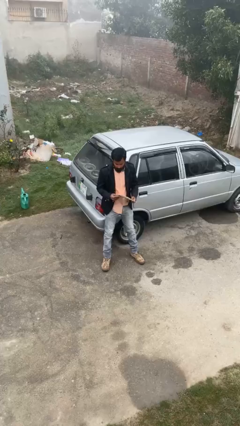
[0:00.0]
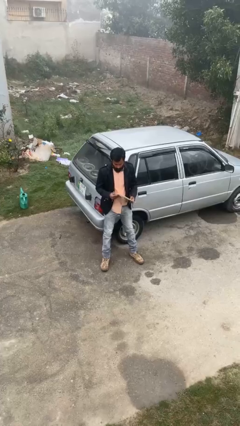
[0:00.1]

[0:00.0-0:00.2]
person reads document

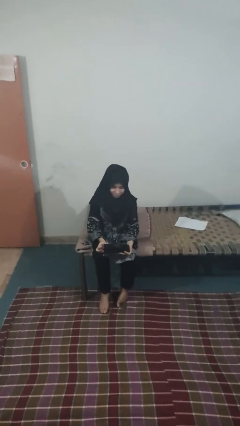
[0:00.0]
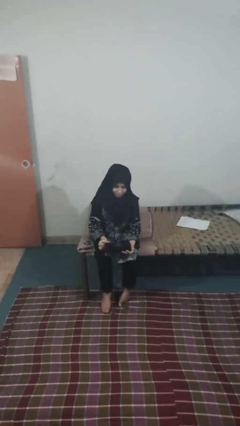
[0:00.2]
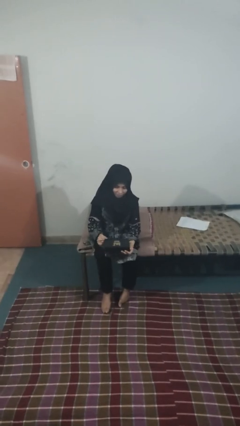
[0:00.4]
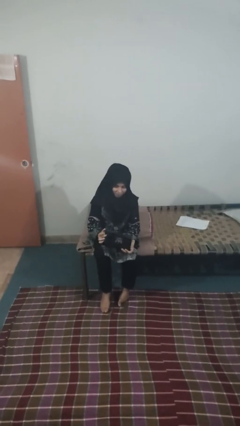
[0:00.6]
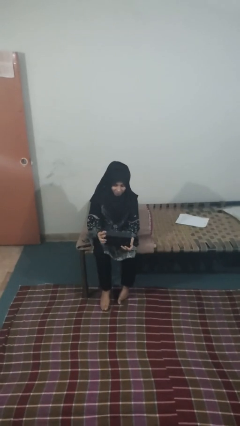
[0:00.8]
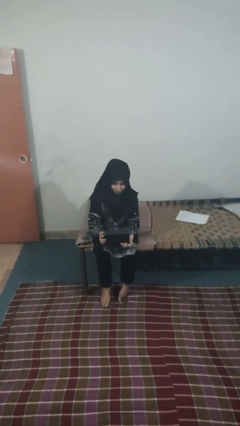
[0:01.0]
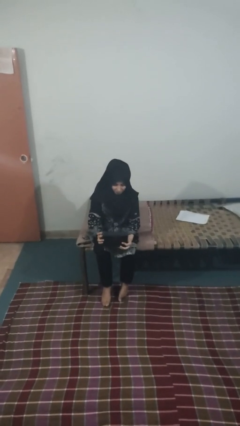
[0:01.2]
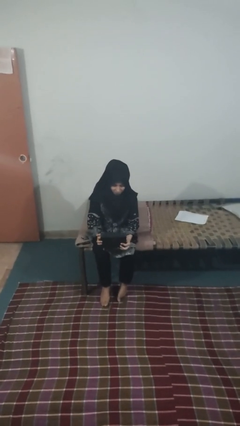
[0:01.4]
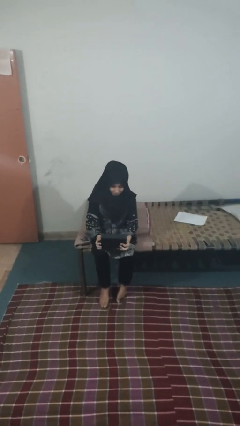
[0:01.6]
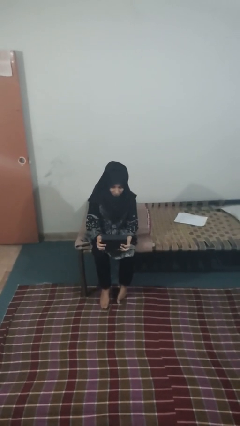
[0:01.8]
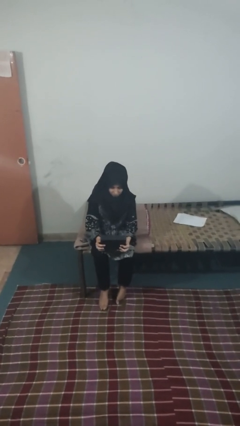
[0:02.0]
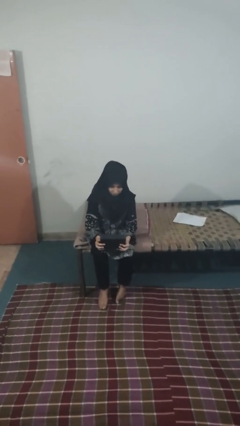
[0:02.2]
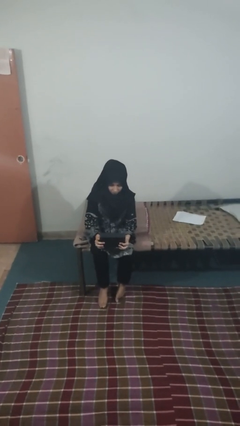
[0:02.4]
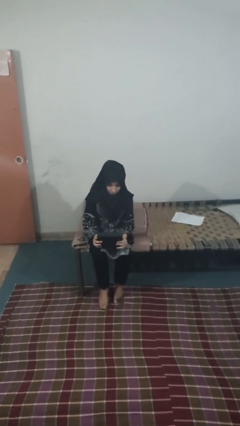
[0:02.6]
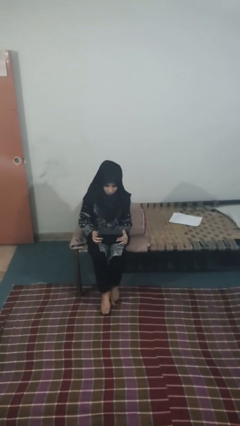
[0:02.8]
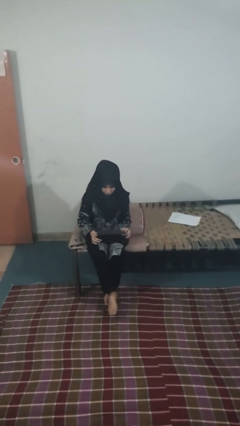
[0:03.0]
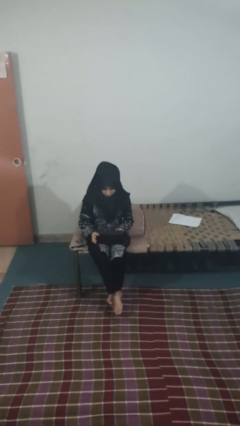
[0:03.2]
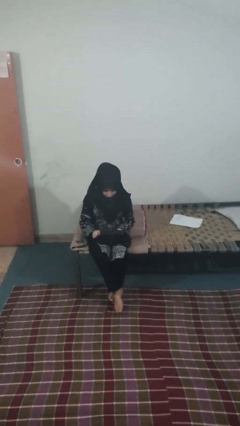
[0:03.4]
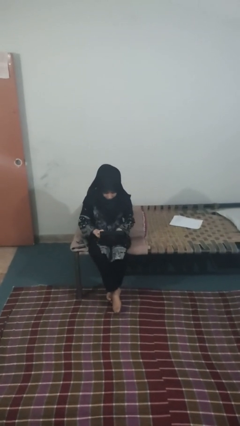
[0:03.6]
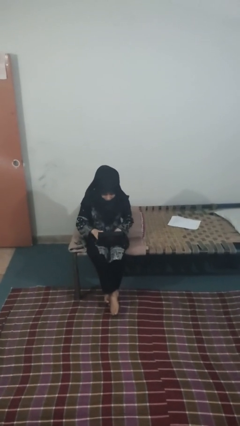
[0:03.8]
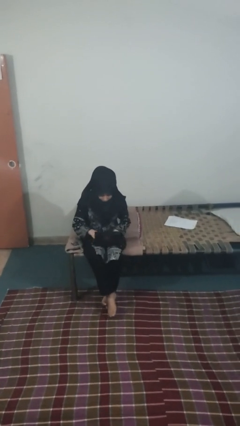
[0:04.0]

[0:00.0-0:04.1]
person opens jewelry box

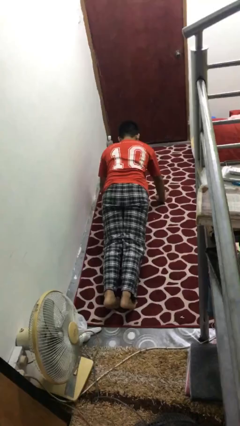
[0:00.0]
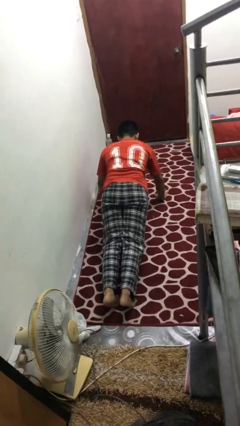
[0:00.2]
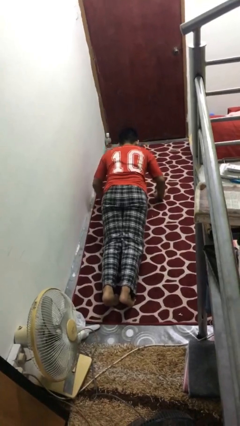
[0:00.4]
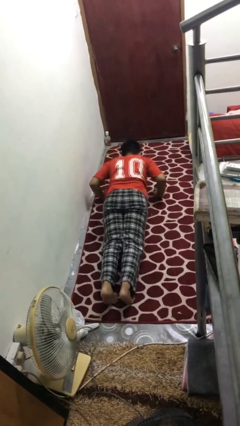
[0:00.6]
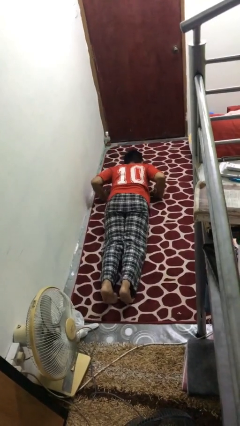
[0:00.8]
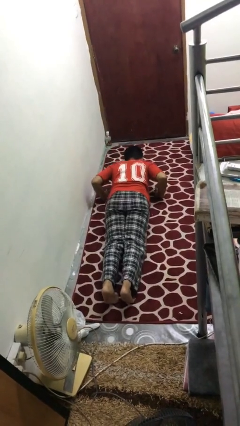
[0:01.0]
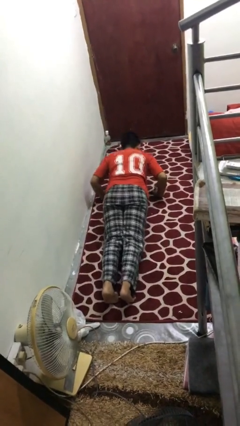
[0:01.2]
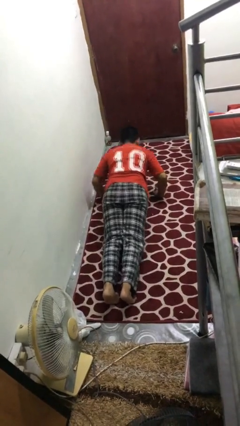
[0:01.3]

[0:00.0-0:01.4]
person exercises with pushup

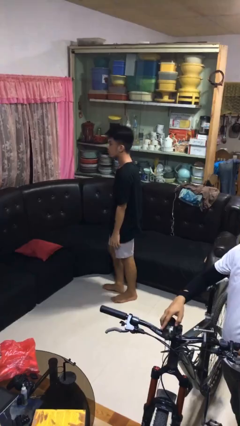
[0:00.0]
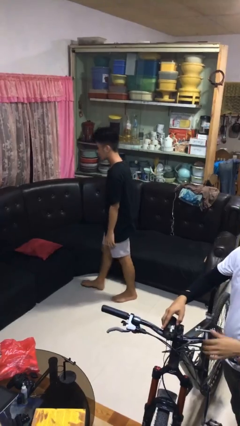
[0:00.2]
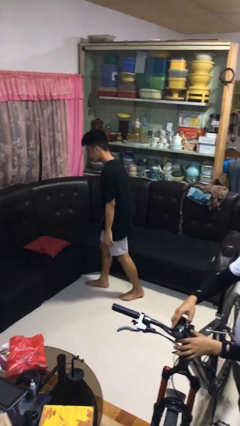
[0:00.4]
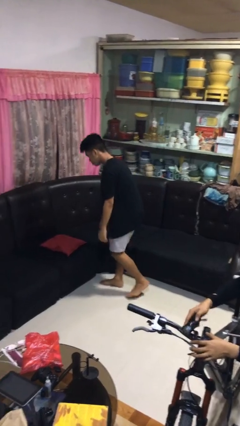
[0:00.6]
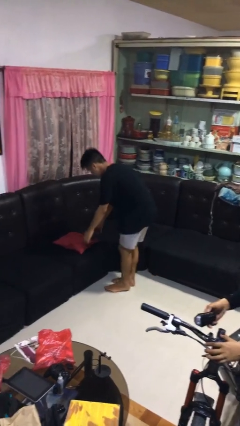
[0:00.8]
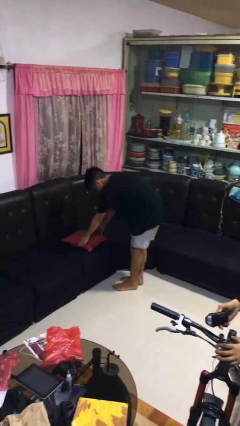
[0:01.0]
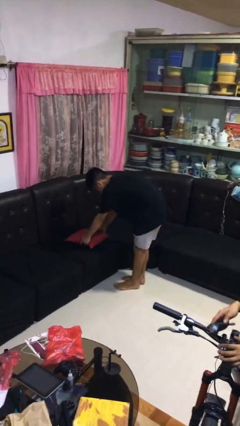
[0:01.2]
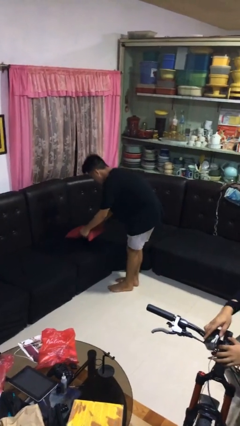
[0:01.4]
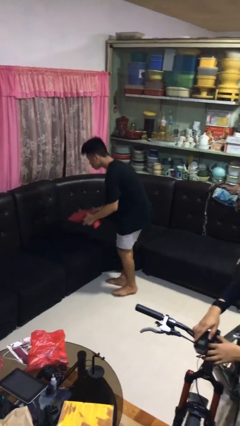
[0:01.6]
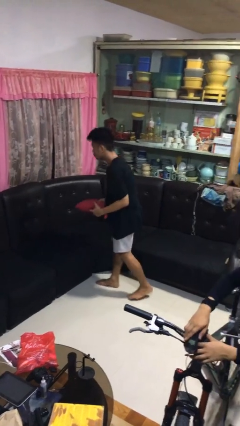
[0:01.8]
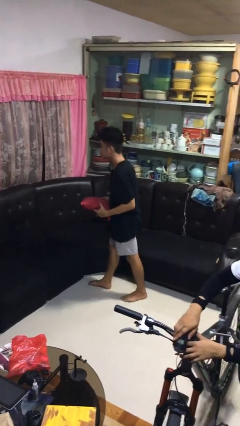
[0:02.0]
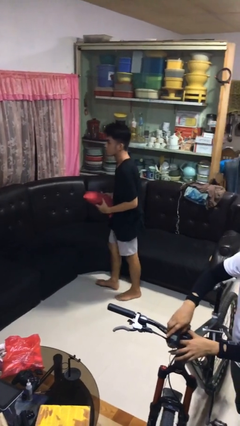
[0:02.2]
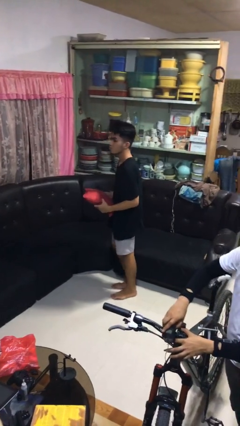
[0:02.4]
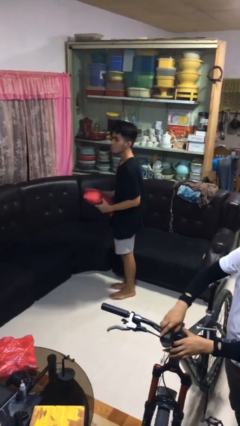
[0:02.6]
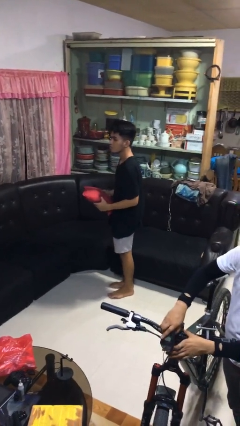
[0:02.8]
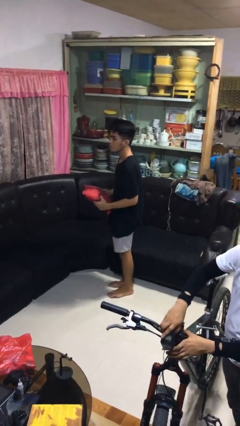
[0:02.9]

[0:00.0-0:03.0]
person picks up object from couch

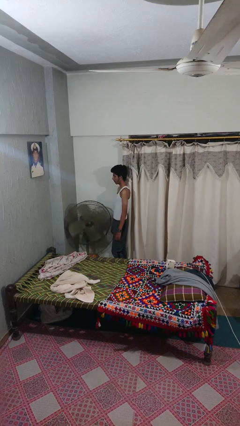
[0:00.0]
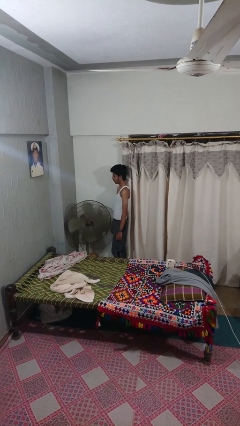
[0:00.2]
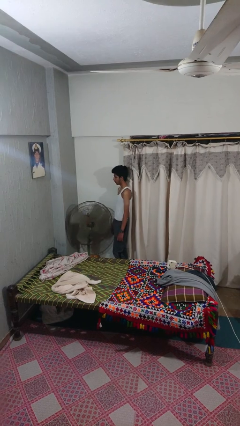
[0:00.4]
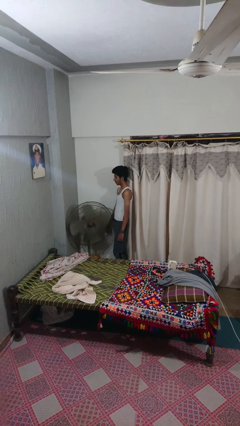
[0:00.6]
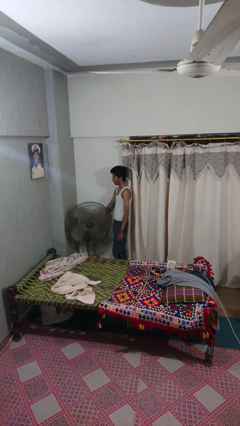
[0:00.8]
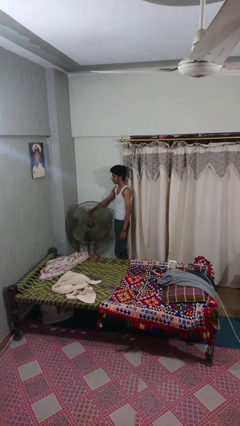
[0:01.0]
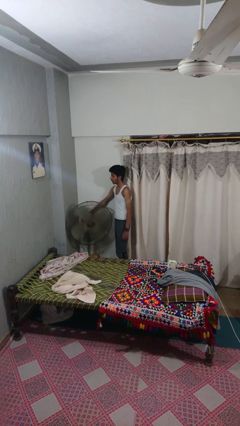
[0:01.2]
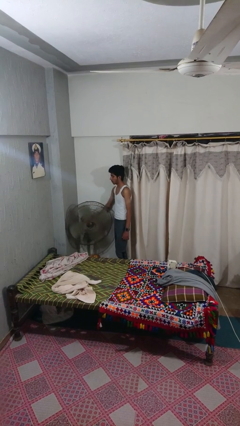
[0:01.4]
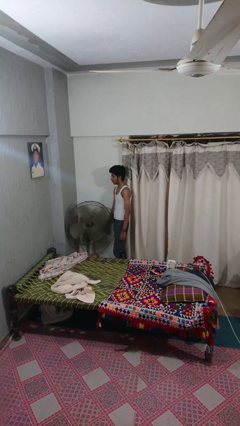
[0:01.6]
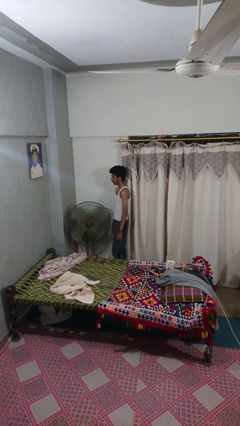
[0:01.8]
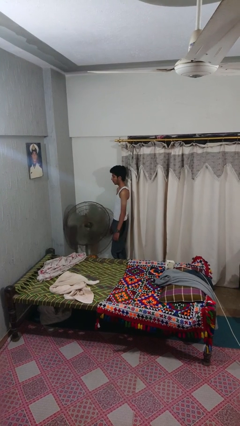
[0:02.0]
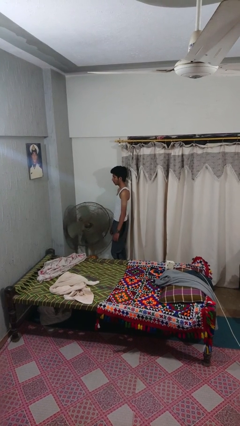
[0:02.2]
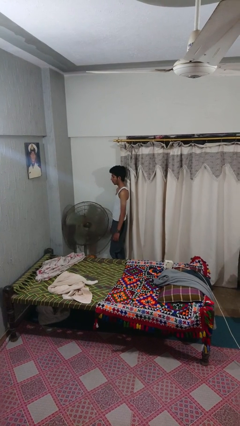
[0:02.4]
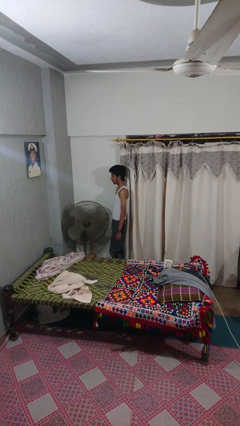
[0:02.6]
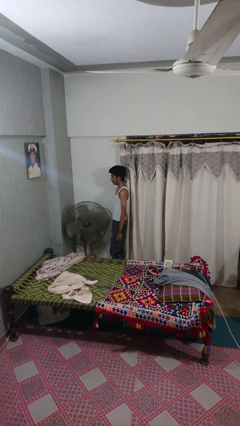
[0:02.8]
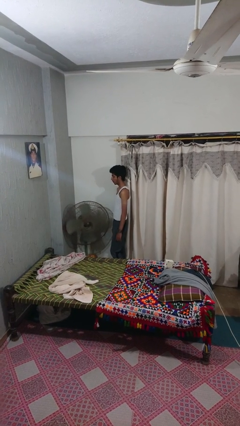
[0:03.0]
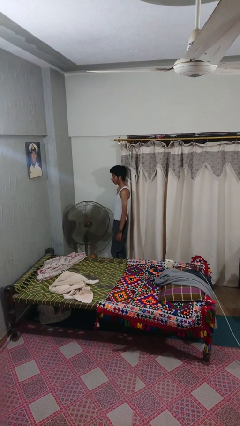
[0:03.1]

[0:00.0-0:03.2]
person turns off fan

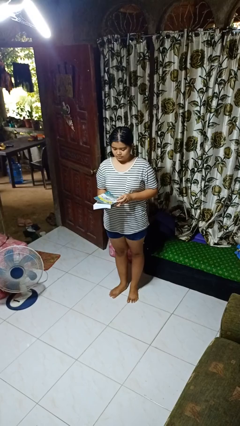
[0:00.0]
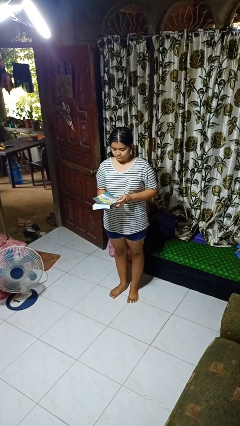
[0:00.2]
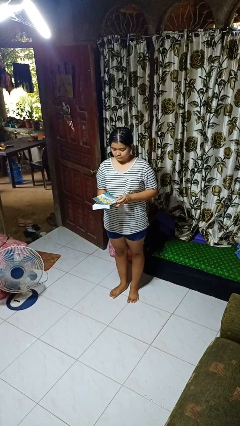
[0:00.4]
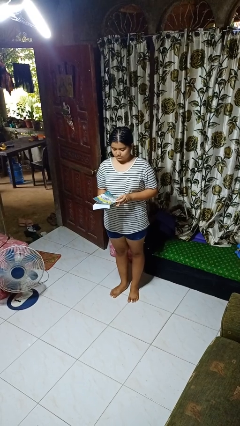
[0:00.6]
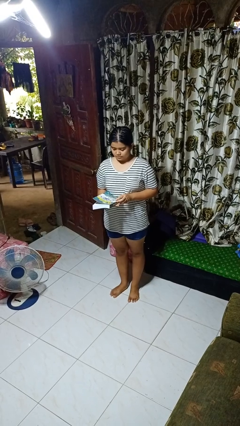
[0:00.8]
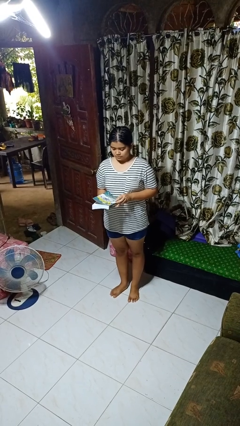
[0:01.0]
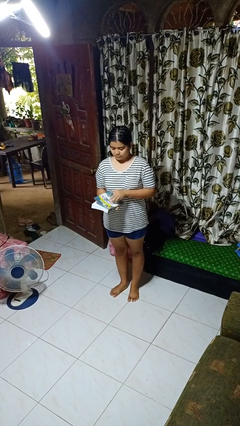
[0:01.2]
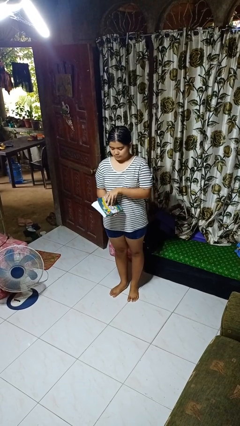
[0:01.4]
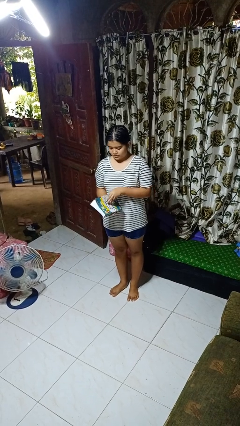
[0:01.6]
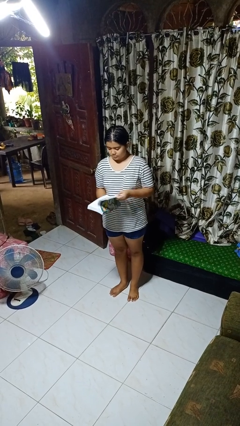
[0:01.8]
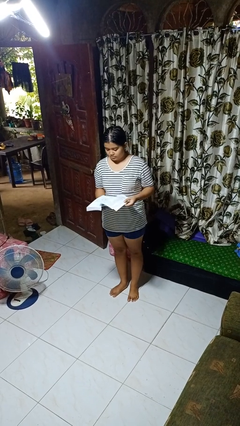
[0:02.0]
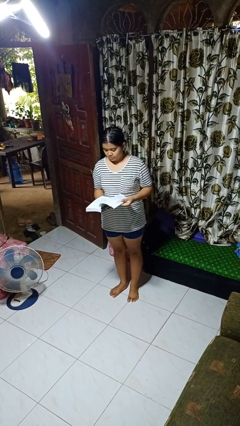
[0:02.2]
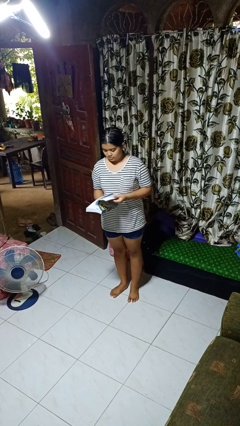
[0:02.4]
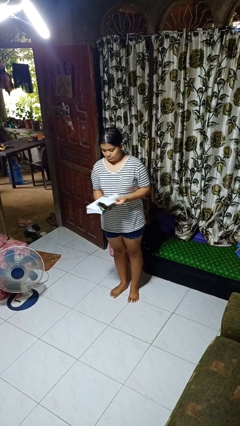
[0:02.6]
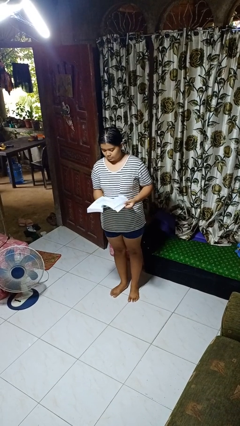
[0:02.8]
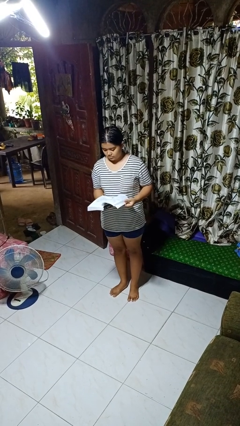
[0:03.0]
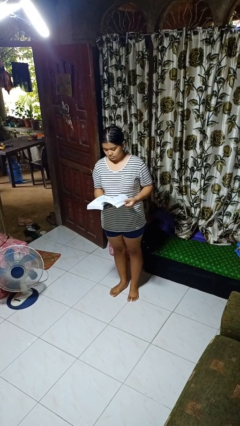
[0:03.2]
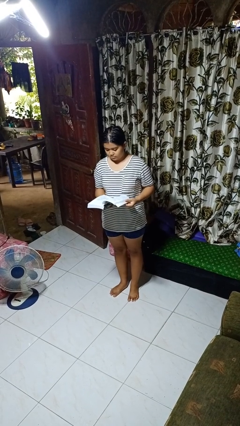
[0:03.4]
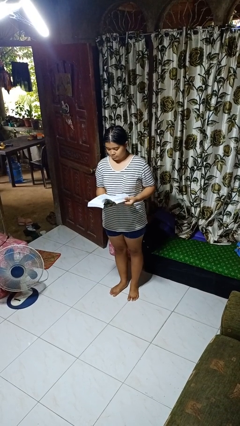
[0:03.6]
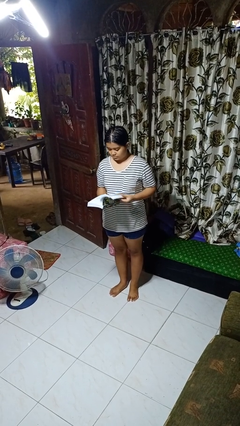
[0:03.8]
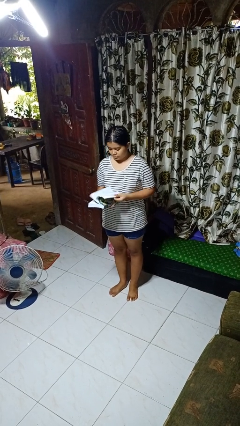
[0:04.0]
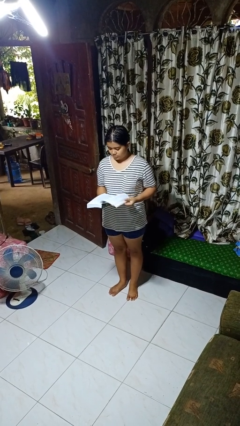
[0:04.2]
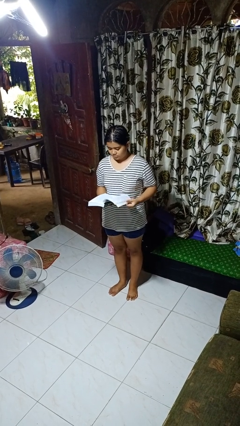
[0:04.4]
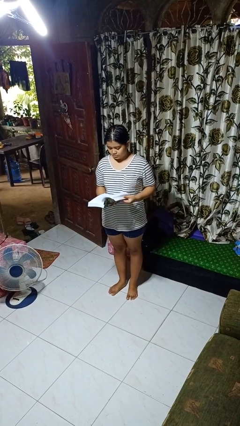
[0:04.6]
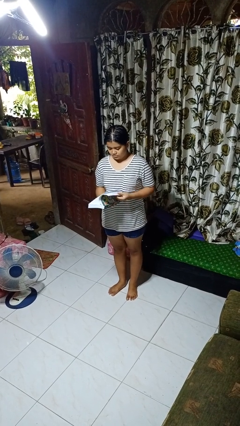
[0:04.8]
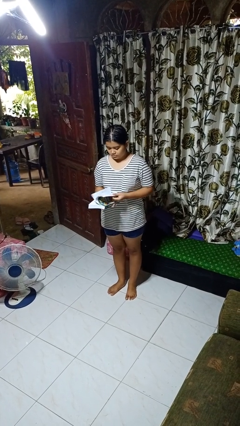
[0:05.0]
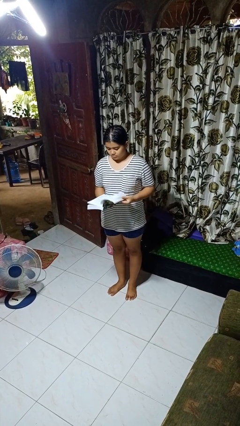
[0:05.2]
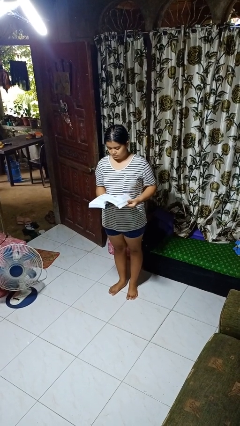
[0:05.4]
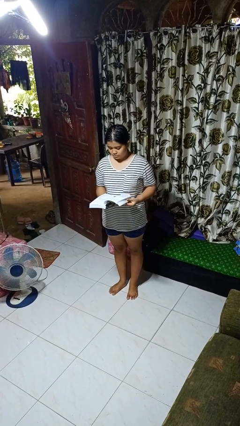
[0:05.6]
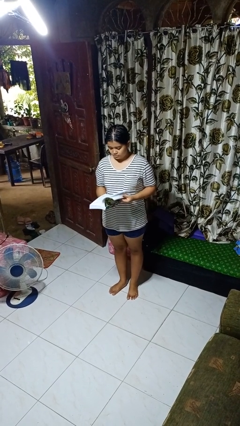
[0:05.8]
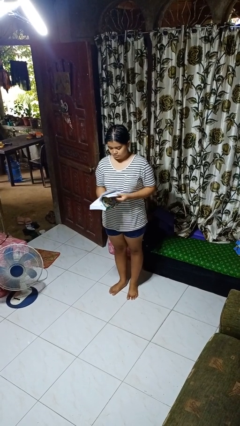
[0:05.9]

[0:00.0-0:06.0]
person reads book
